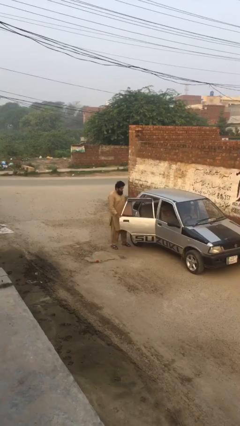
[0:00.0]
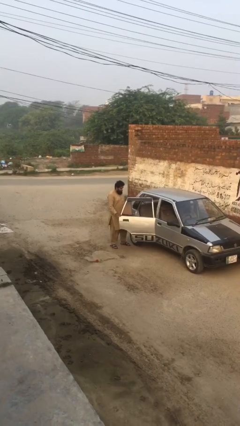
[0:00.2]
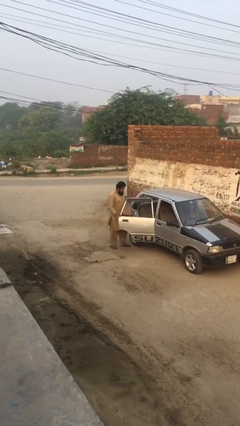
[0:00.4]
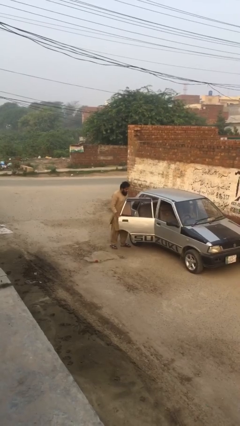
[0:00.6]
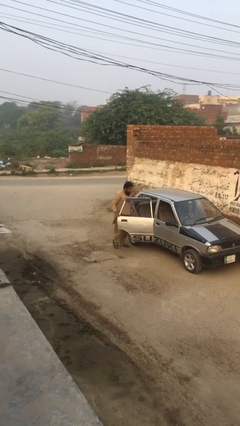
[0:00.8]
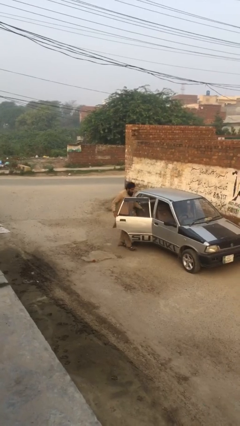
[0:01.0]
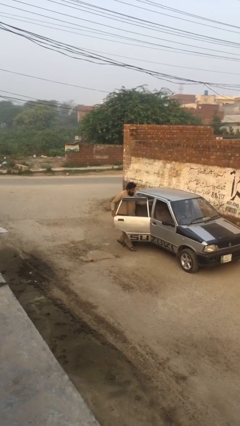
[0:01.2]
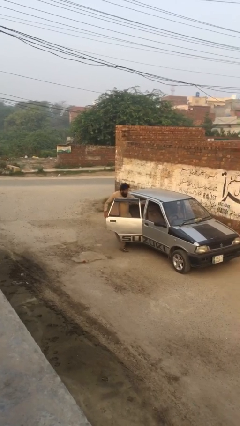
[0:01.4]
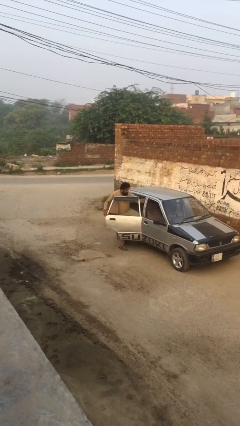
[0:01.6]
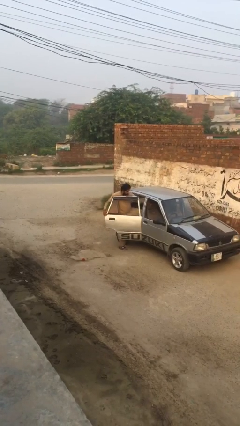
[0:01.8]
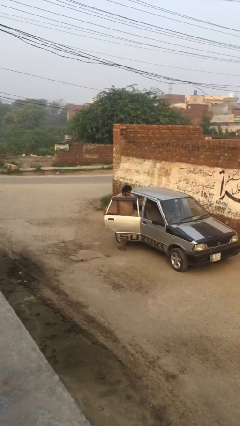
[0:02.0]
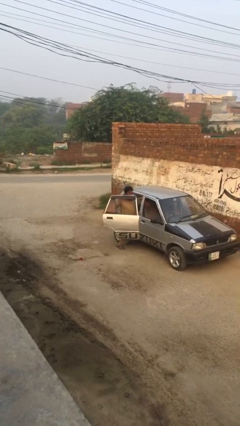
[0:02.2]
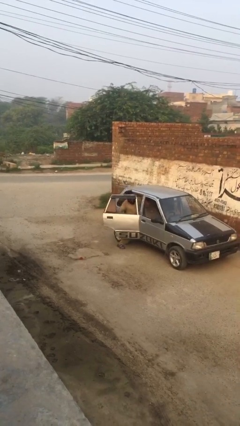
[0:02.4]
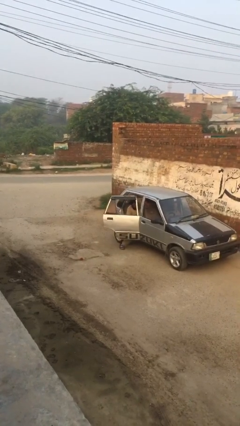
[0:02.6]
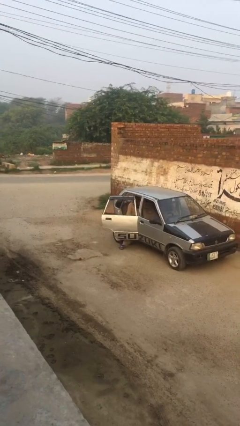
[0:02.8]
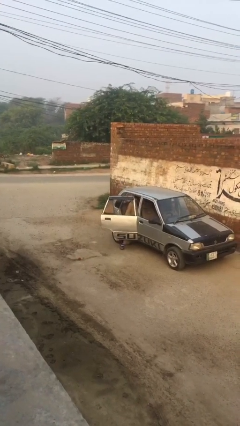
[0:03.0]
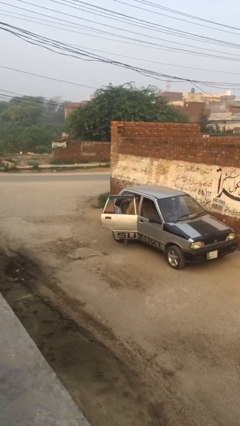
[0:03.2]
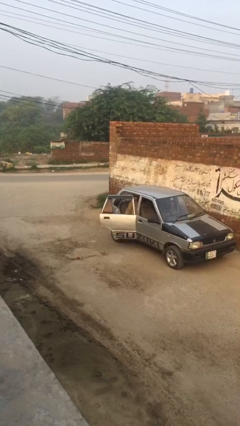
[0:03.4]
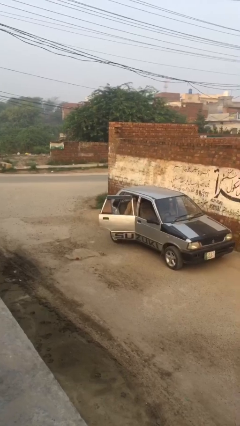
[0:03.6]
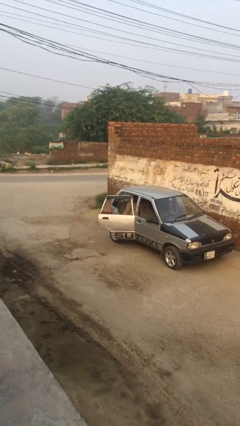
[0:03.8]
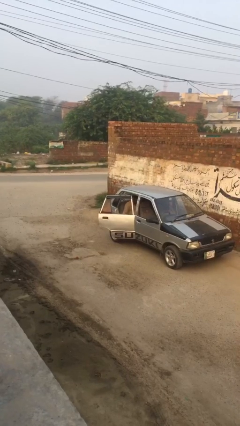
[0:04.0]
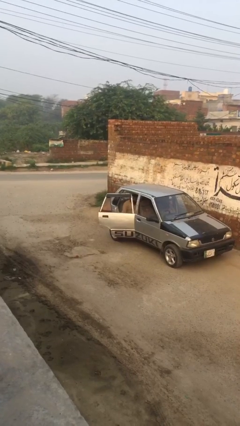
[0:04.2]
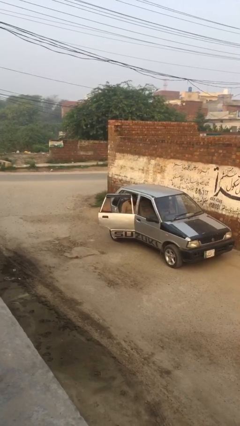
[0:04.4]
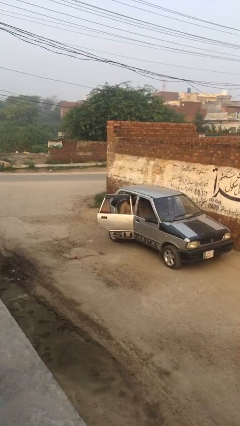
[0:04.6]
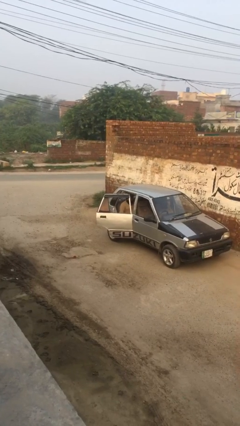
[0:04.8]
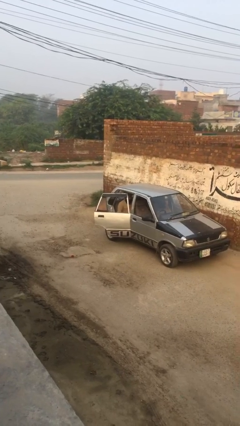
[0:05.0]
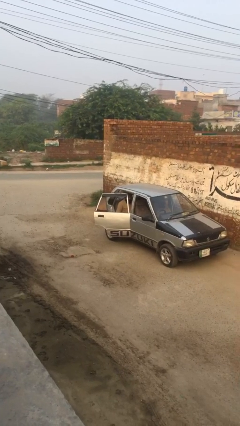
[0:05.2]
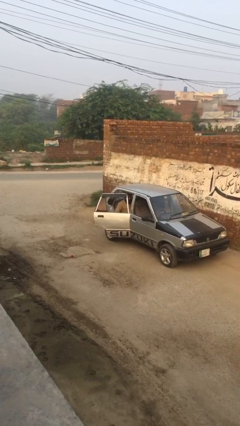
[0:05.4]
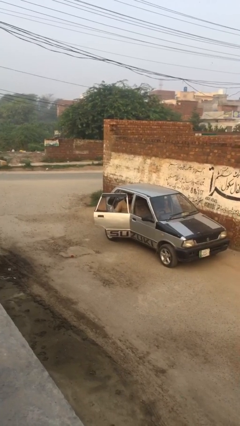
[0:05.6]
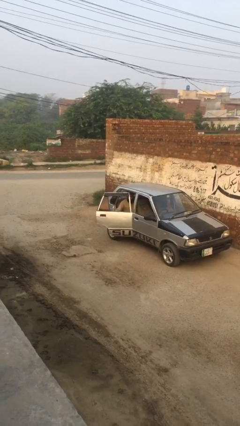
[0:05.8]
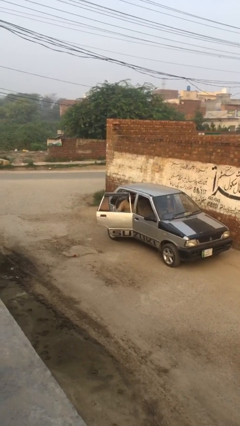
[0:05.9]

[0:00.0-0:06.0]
person enters car

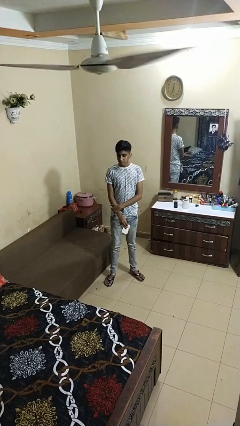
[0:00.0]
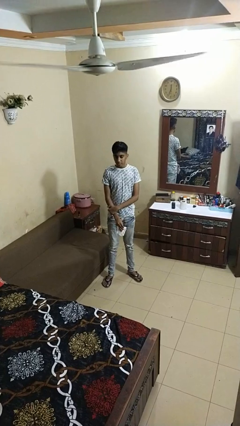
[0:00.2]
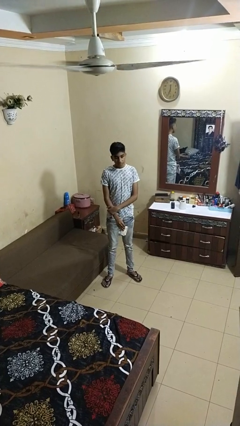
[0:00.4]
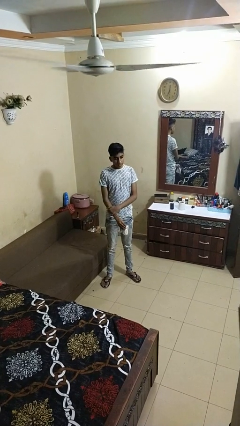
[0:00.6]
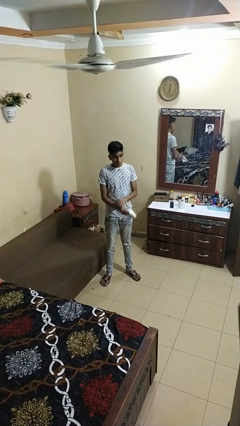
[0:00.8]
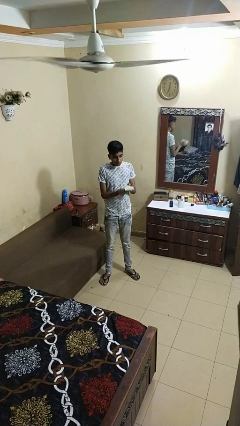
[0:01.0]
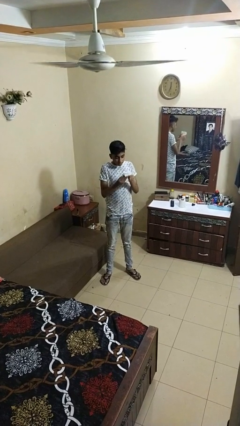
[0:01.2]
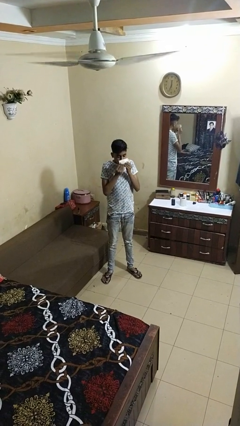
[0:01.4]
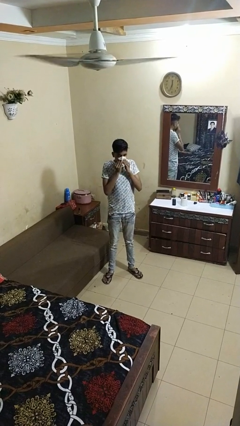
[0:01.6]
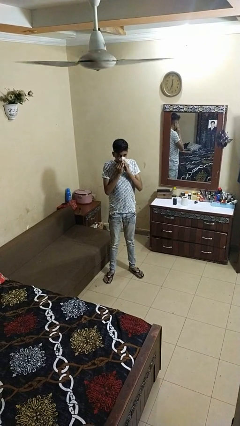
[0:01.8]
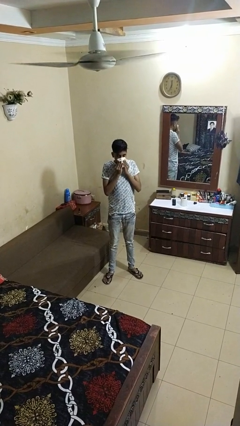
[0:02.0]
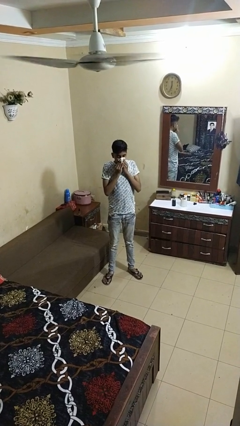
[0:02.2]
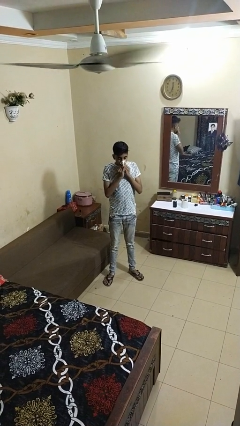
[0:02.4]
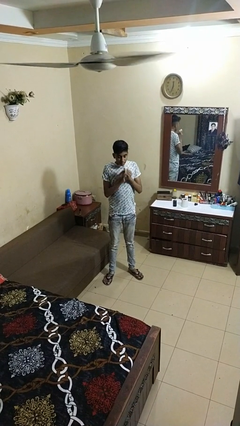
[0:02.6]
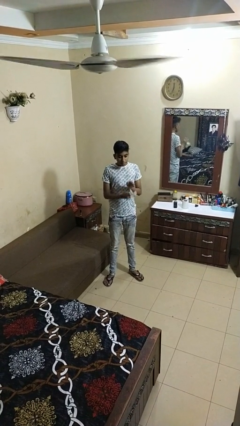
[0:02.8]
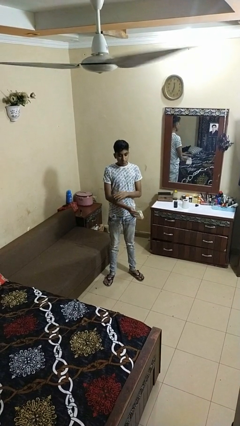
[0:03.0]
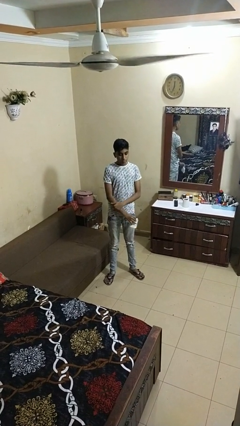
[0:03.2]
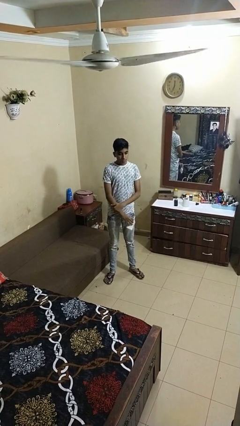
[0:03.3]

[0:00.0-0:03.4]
person blows nose

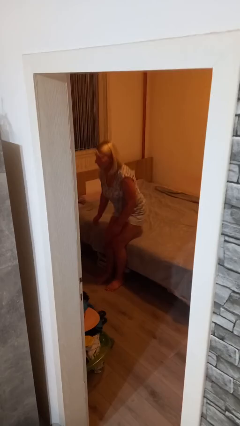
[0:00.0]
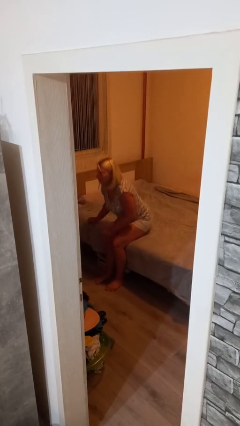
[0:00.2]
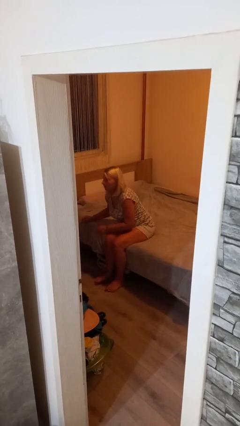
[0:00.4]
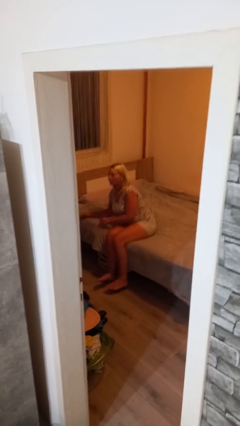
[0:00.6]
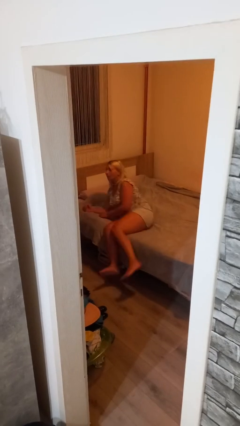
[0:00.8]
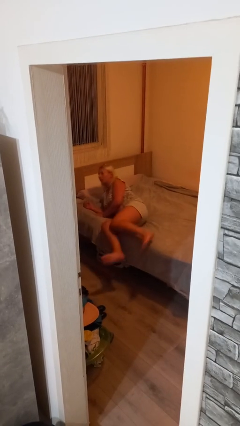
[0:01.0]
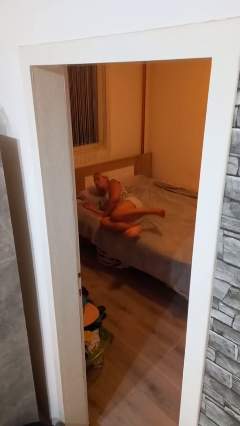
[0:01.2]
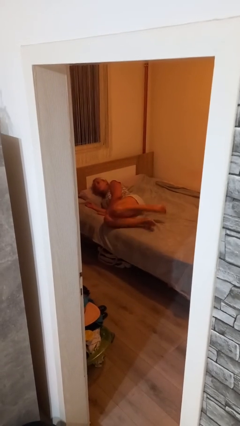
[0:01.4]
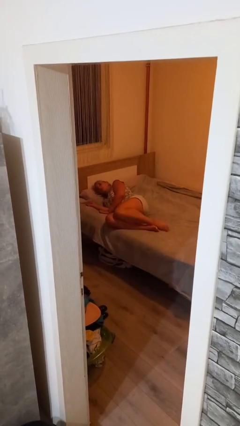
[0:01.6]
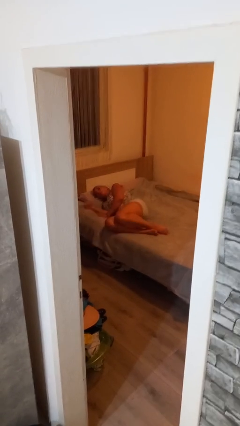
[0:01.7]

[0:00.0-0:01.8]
person lies down on bed

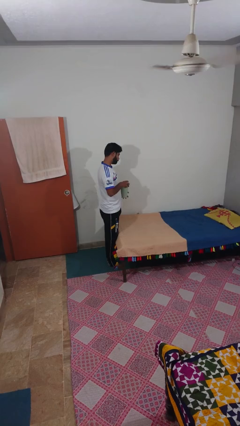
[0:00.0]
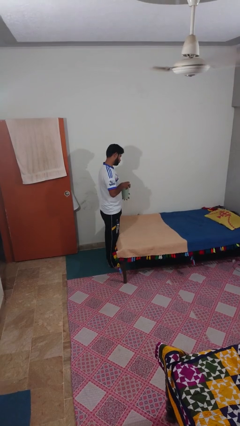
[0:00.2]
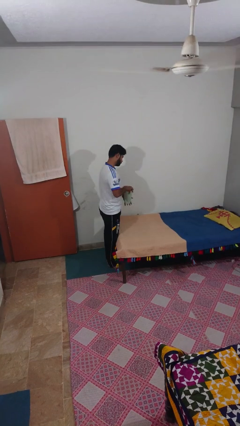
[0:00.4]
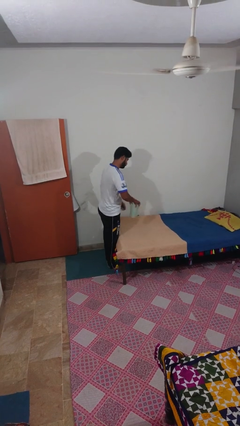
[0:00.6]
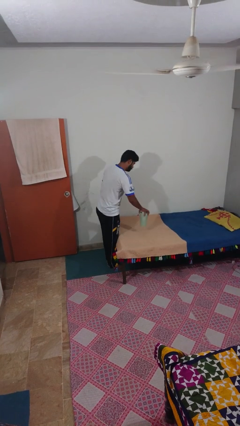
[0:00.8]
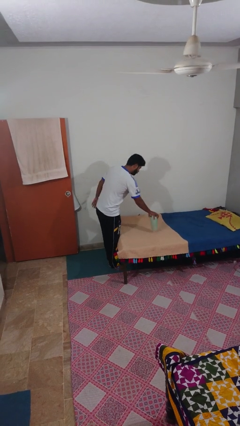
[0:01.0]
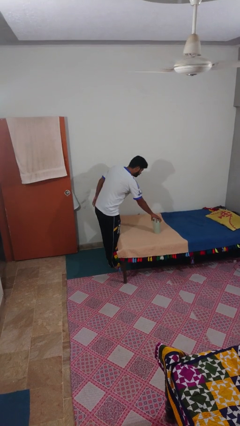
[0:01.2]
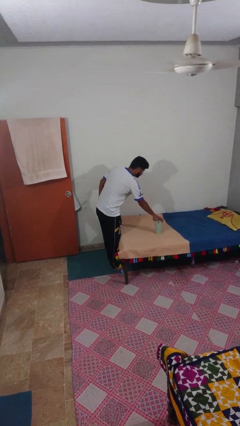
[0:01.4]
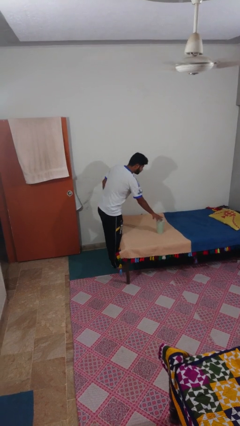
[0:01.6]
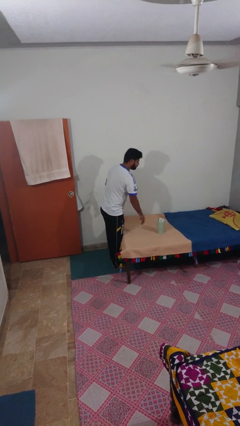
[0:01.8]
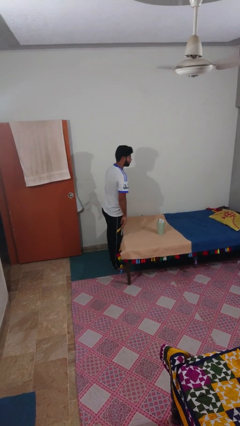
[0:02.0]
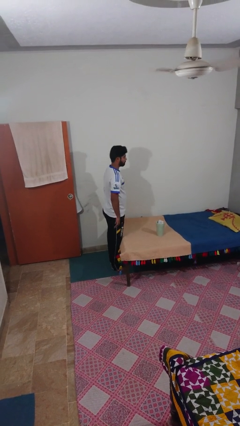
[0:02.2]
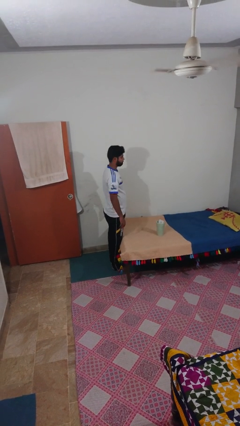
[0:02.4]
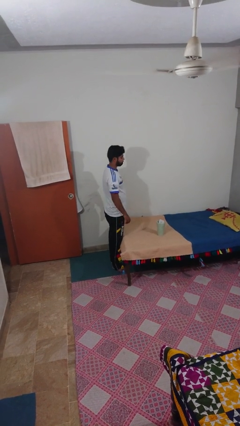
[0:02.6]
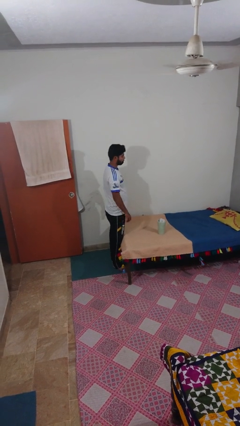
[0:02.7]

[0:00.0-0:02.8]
person puts down object on bed

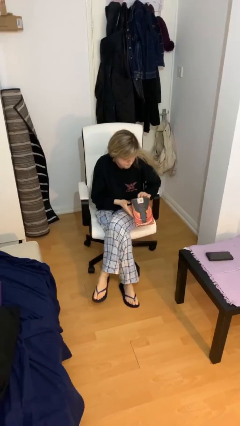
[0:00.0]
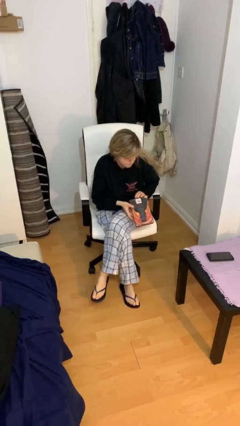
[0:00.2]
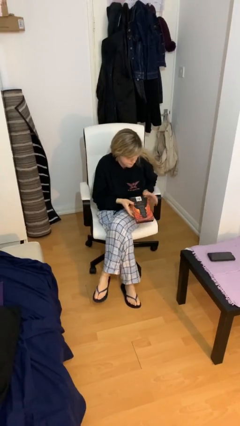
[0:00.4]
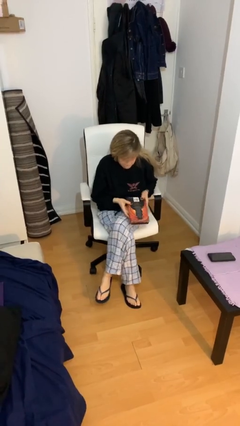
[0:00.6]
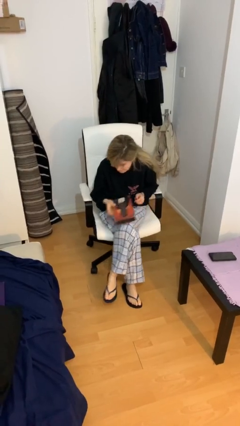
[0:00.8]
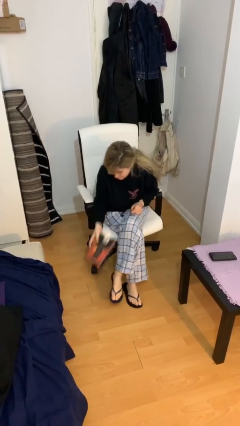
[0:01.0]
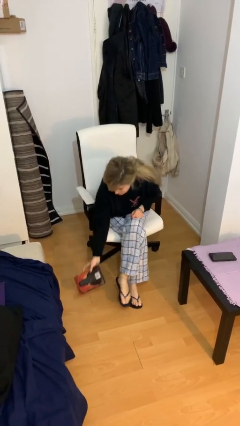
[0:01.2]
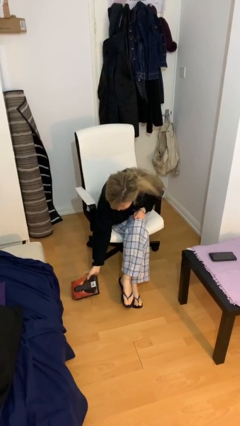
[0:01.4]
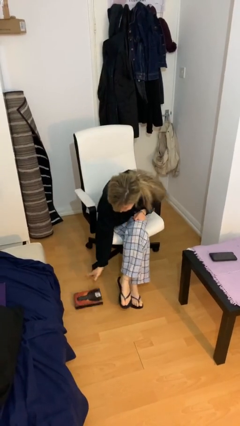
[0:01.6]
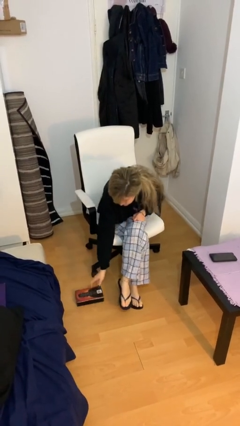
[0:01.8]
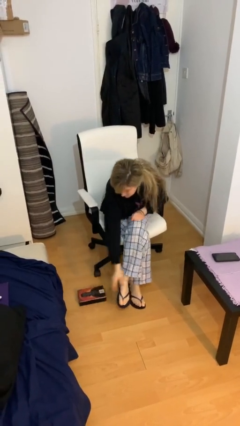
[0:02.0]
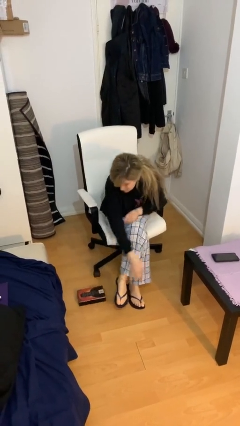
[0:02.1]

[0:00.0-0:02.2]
person puts down object on floor

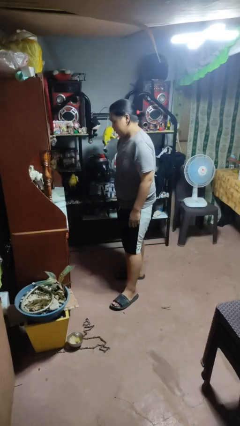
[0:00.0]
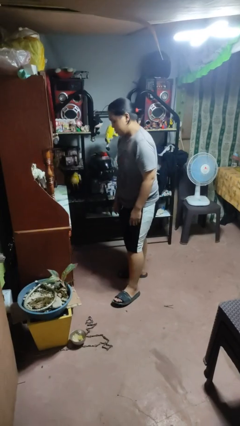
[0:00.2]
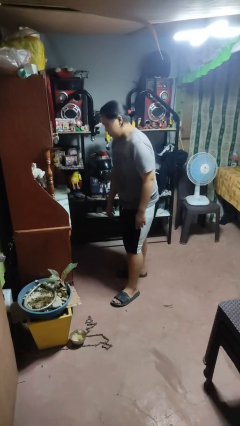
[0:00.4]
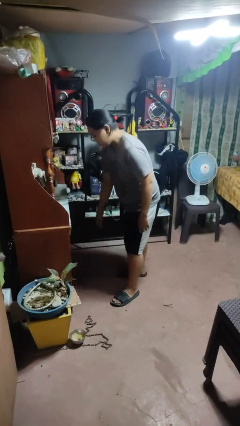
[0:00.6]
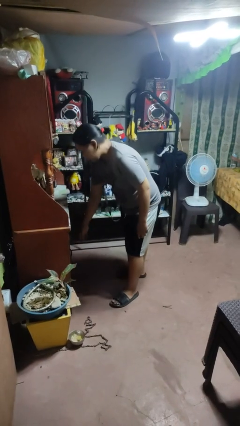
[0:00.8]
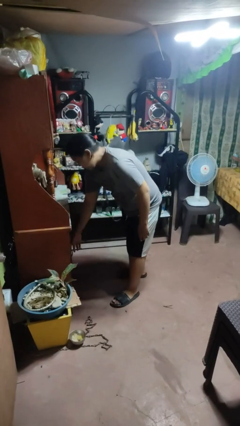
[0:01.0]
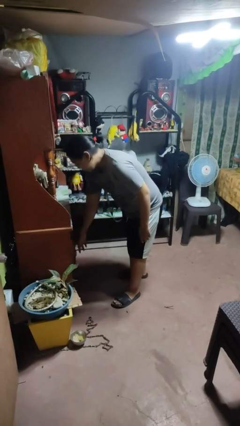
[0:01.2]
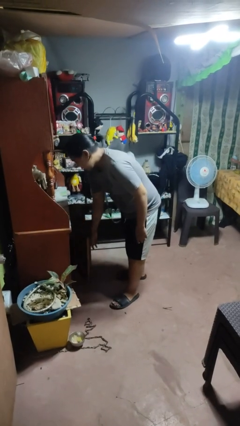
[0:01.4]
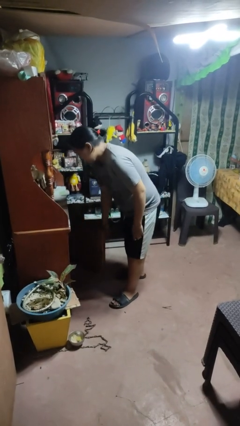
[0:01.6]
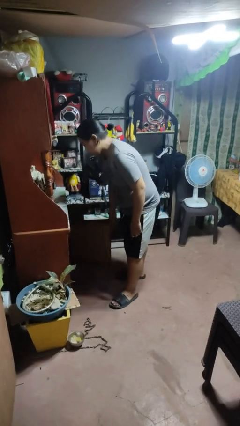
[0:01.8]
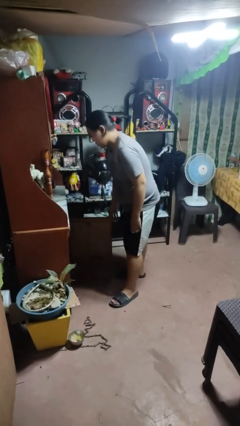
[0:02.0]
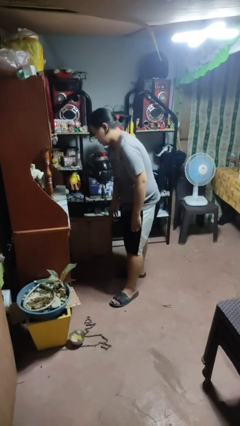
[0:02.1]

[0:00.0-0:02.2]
person opens cabinet
